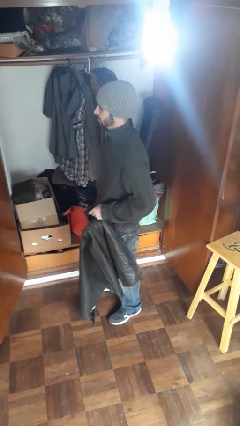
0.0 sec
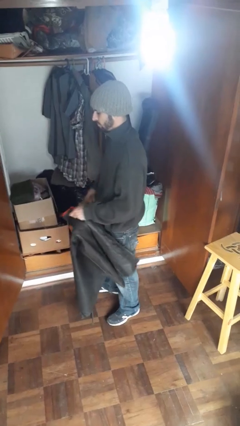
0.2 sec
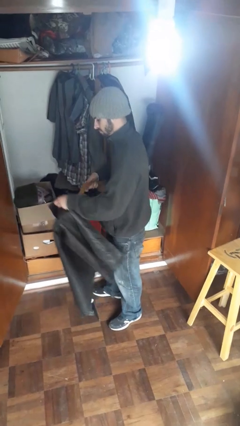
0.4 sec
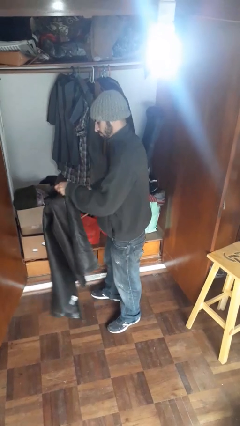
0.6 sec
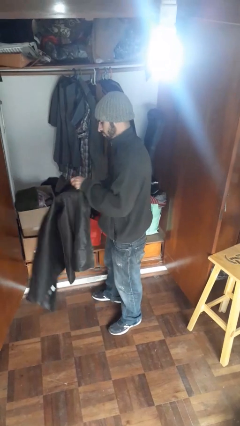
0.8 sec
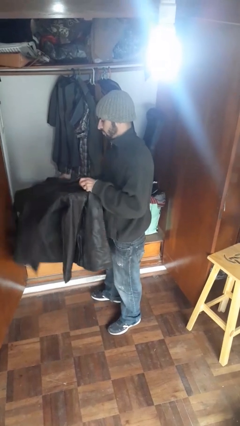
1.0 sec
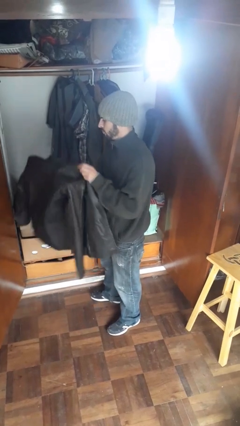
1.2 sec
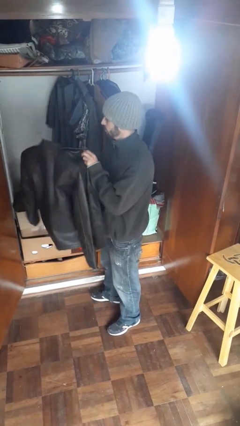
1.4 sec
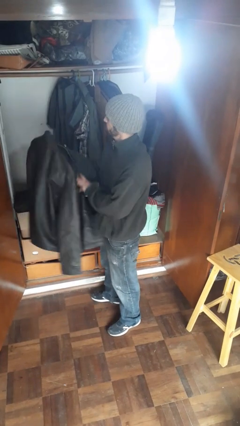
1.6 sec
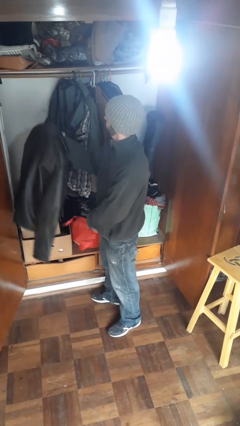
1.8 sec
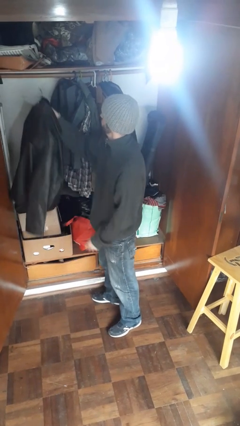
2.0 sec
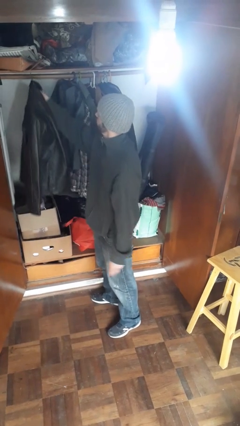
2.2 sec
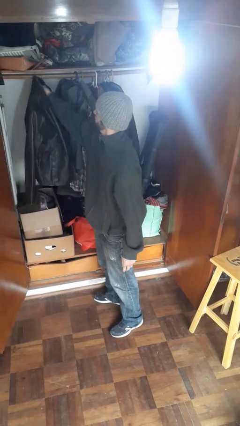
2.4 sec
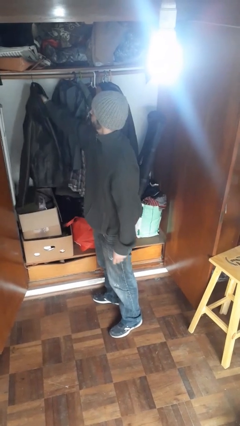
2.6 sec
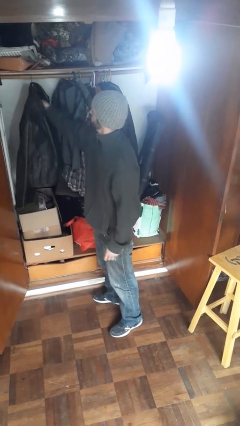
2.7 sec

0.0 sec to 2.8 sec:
person puts clothes into closet

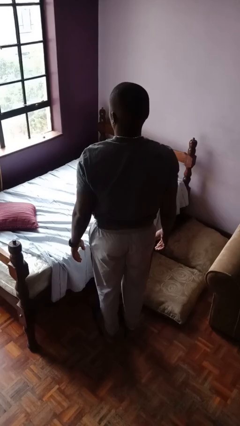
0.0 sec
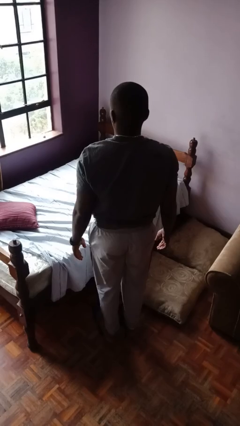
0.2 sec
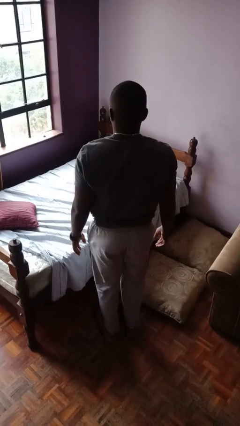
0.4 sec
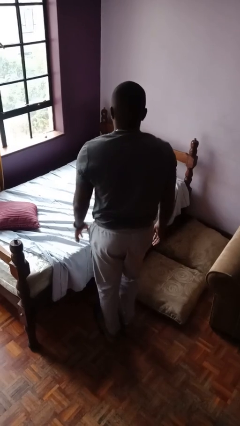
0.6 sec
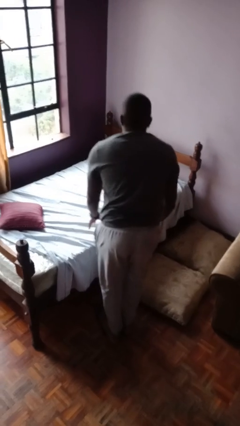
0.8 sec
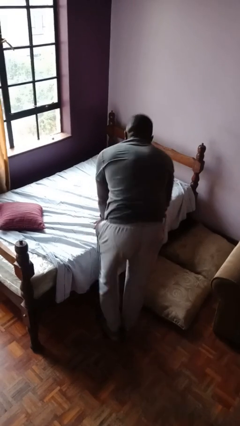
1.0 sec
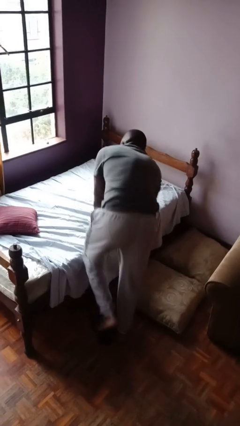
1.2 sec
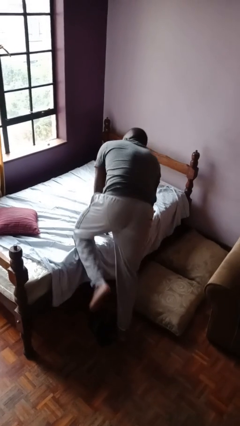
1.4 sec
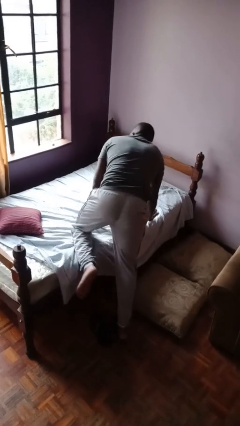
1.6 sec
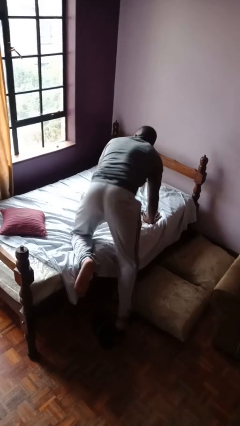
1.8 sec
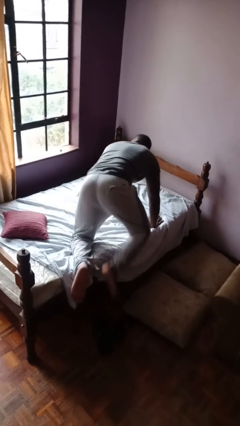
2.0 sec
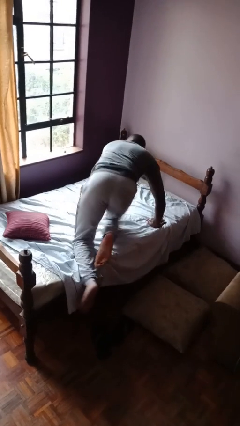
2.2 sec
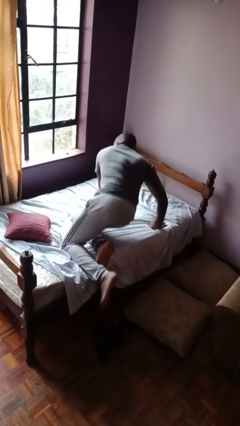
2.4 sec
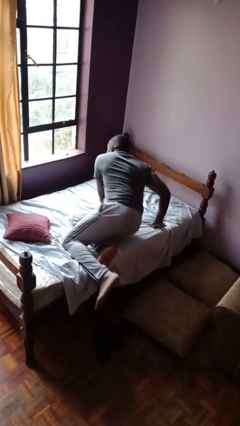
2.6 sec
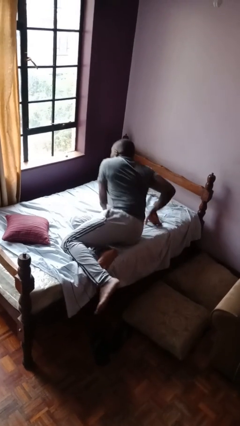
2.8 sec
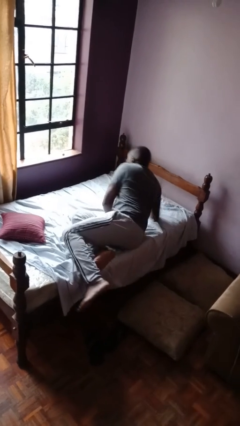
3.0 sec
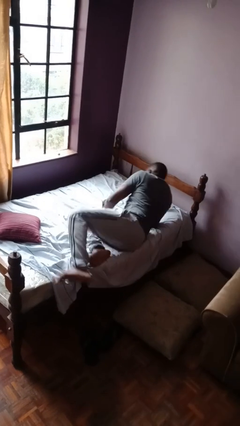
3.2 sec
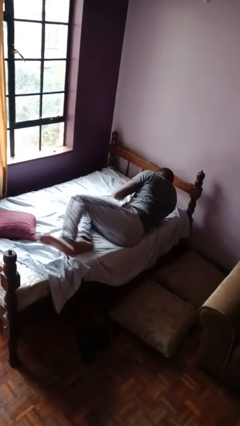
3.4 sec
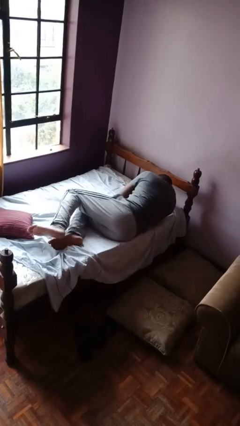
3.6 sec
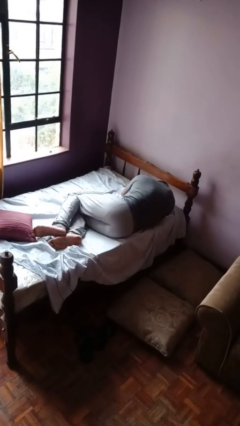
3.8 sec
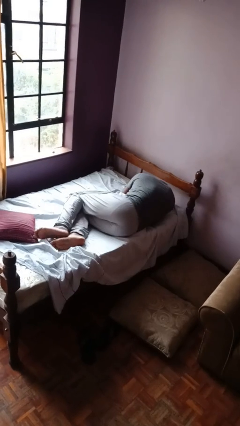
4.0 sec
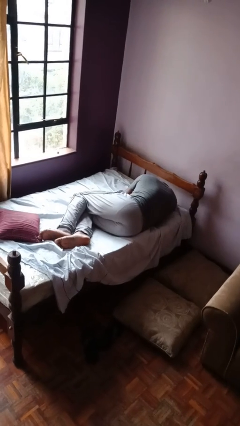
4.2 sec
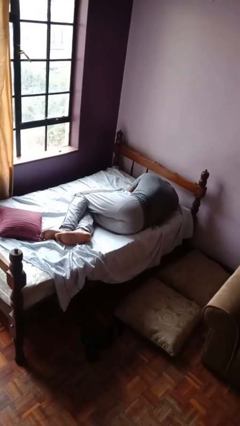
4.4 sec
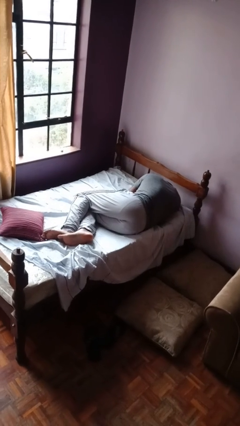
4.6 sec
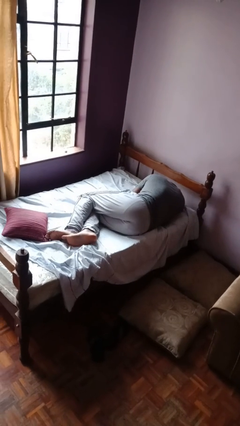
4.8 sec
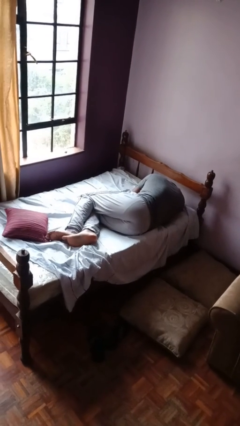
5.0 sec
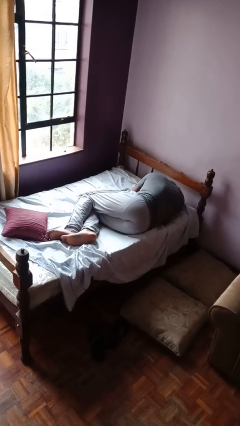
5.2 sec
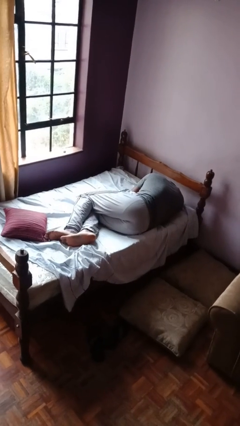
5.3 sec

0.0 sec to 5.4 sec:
person lies down on bed

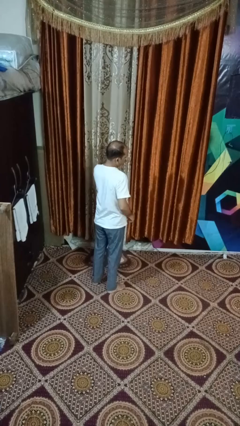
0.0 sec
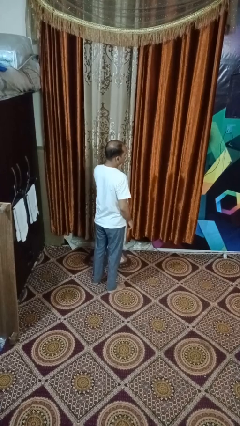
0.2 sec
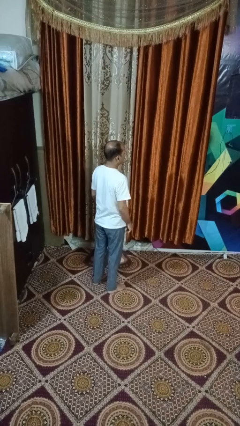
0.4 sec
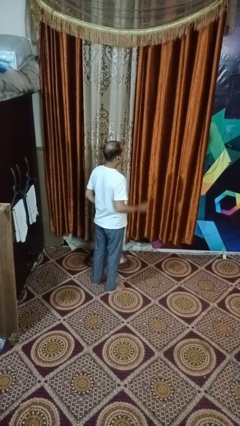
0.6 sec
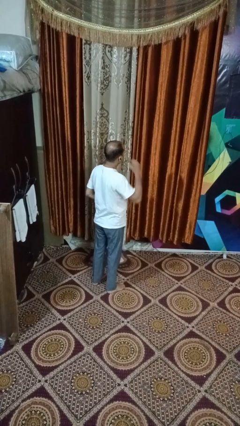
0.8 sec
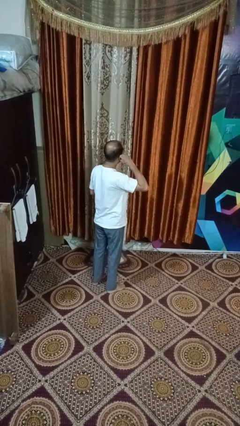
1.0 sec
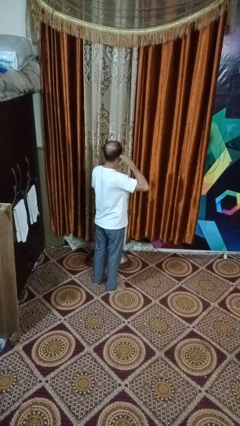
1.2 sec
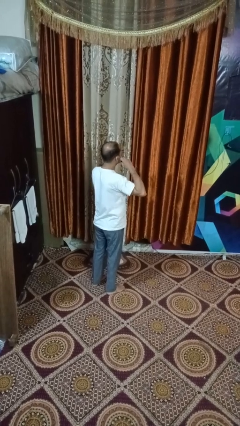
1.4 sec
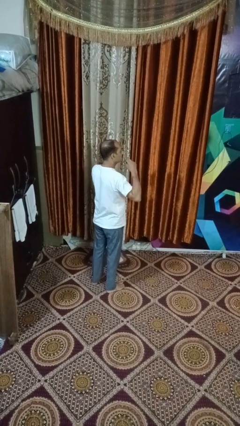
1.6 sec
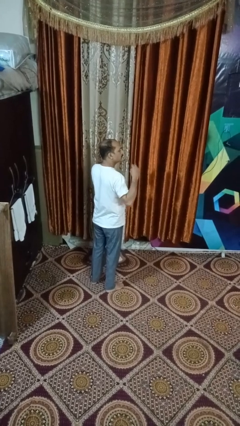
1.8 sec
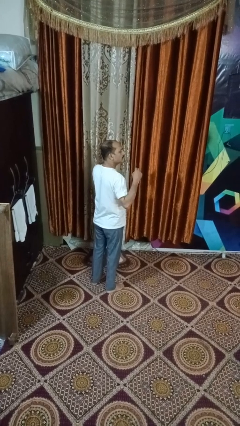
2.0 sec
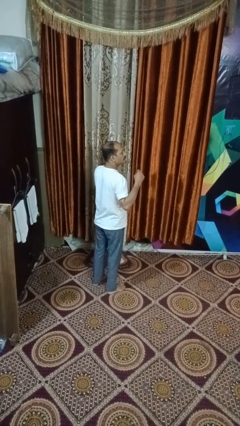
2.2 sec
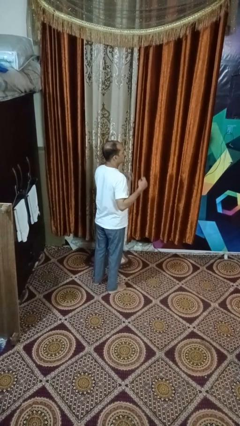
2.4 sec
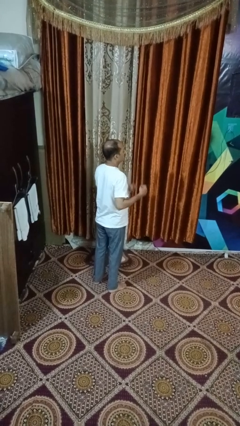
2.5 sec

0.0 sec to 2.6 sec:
person takes off headphones

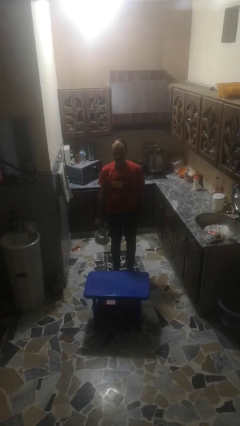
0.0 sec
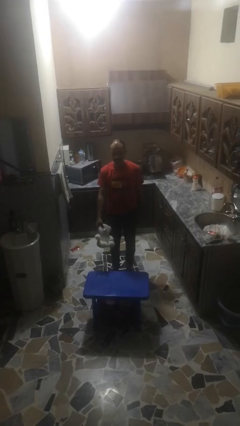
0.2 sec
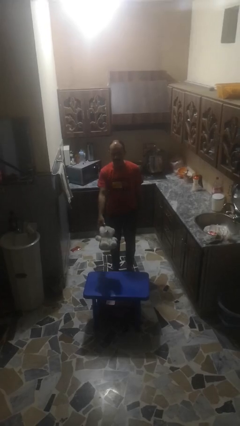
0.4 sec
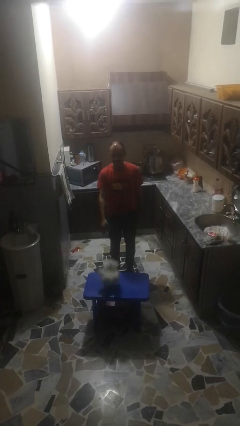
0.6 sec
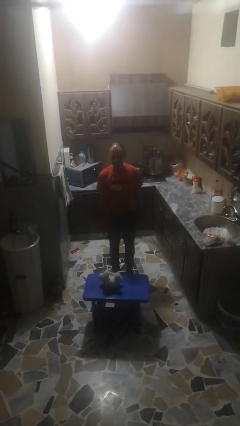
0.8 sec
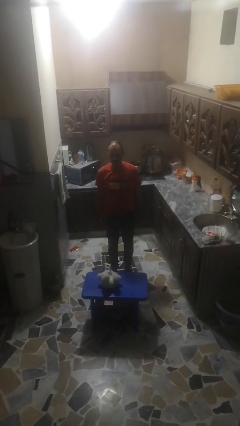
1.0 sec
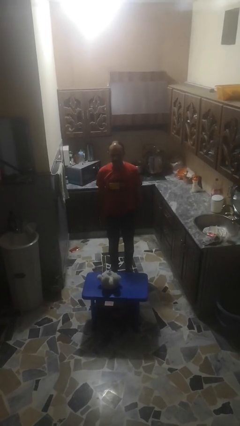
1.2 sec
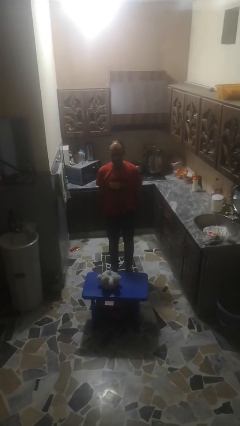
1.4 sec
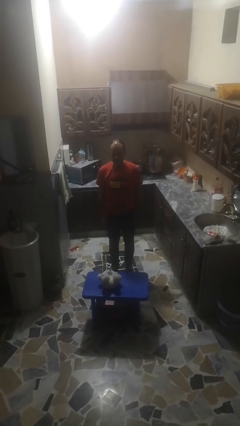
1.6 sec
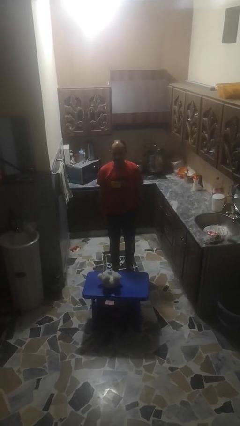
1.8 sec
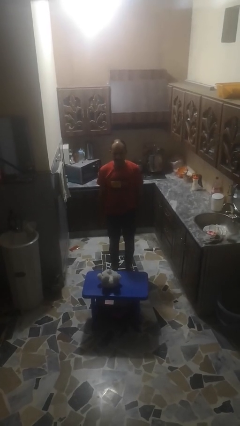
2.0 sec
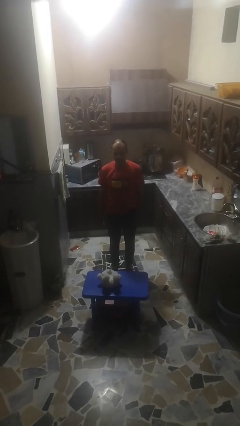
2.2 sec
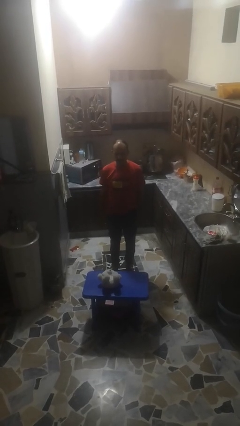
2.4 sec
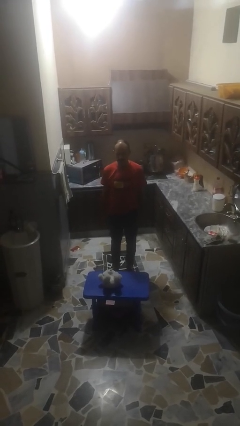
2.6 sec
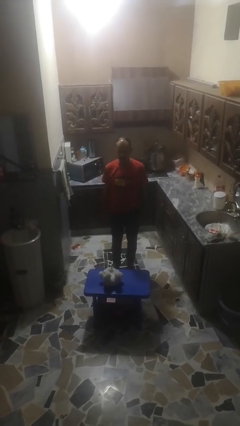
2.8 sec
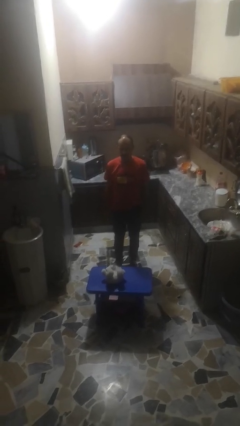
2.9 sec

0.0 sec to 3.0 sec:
person throws object to ground

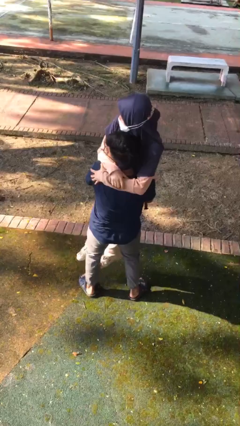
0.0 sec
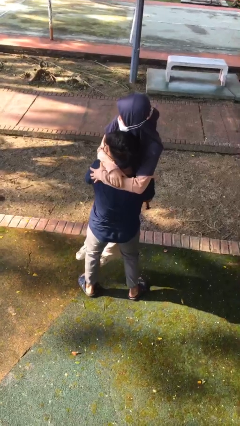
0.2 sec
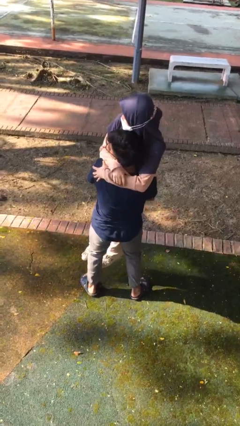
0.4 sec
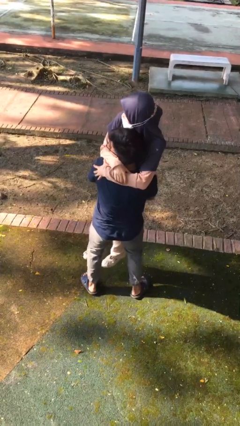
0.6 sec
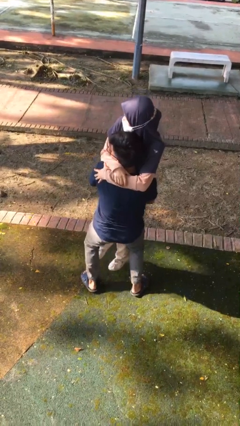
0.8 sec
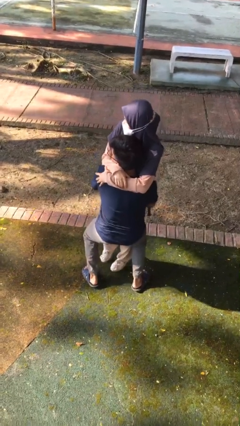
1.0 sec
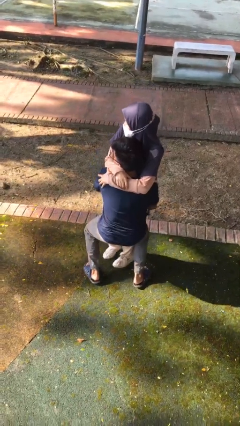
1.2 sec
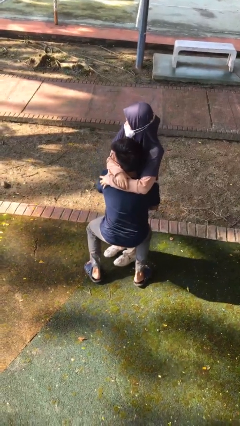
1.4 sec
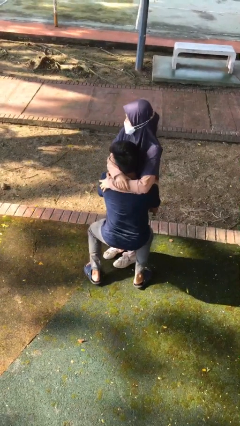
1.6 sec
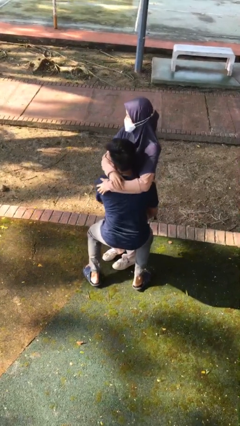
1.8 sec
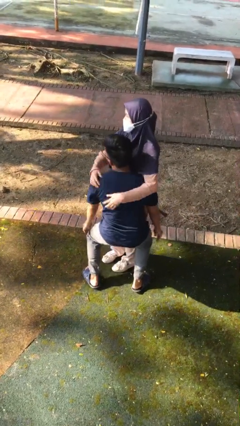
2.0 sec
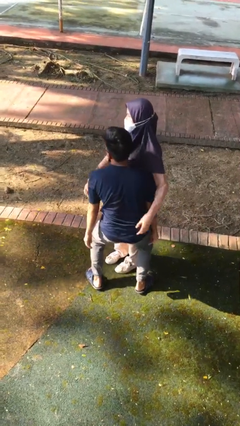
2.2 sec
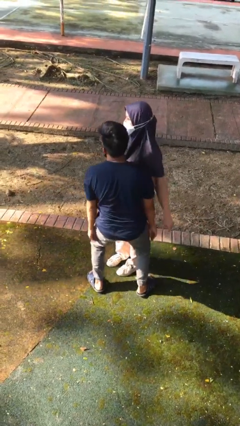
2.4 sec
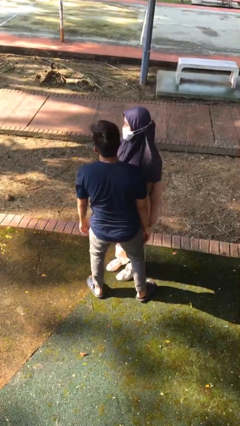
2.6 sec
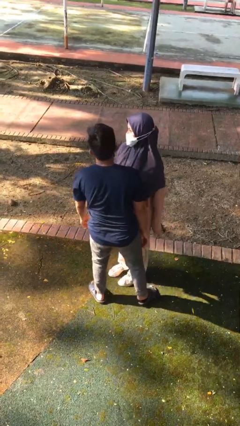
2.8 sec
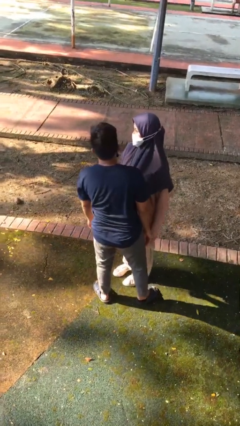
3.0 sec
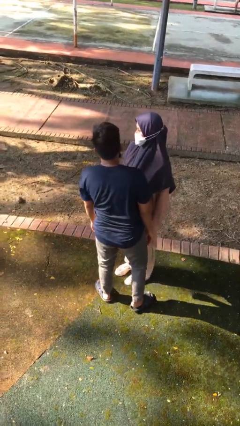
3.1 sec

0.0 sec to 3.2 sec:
person puts down person

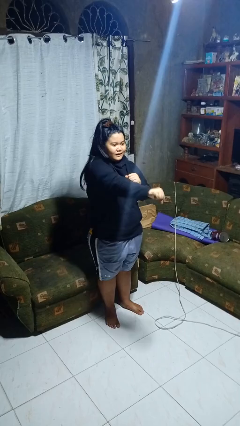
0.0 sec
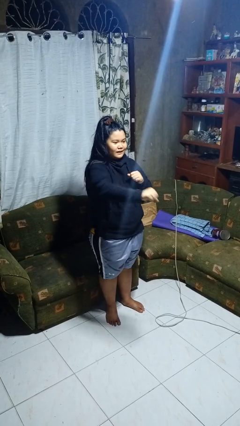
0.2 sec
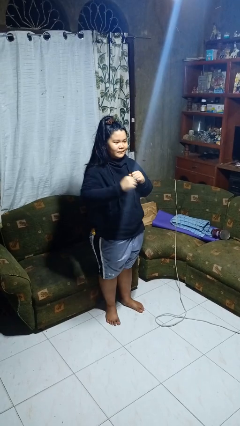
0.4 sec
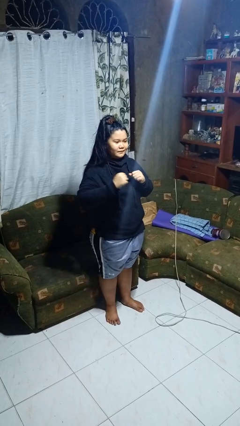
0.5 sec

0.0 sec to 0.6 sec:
person punches
